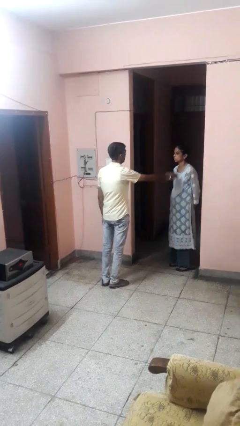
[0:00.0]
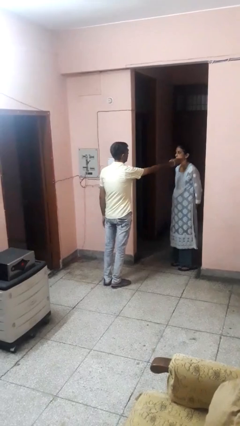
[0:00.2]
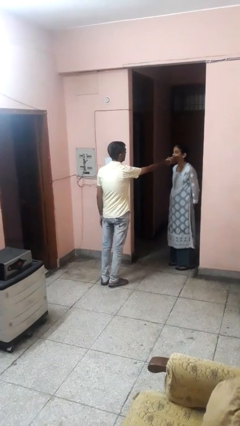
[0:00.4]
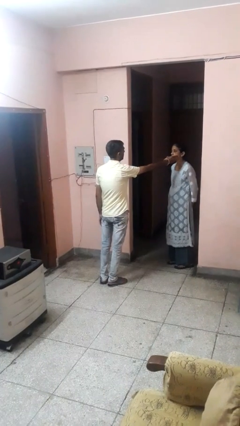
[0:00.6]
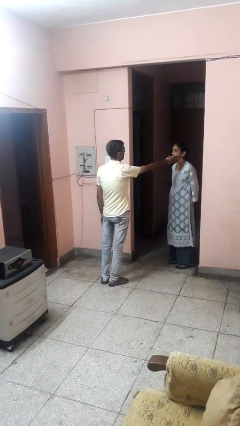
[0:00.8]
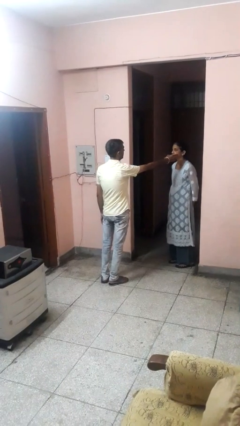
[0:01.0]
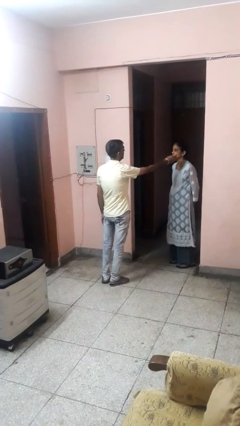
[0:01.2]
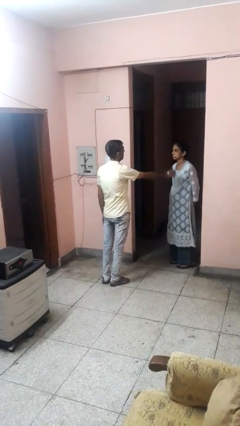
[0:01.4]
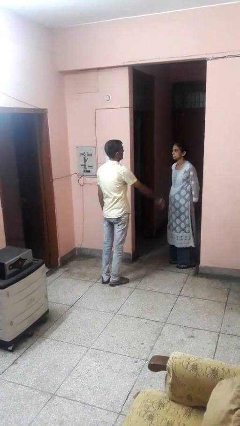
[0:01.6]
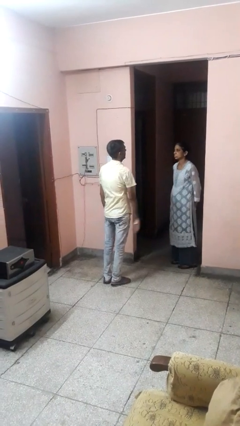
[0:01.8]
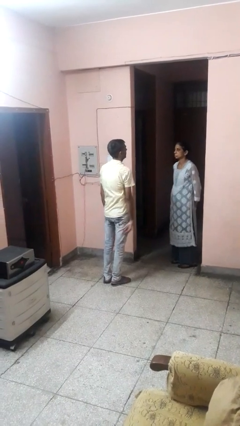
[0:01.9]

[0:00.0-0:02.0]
person touches face of person

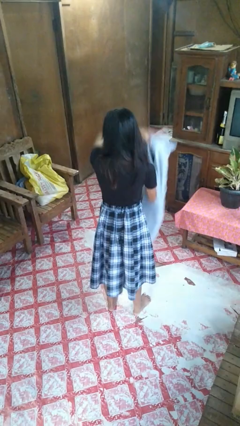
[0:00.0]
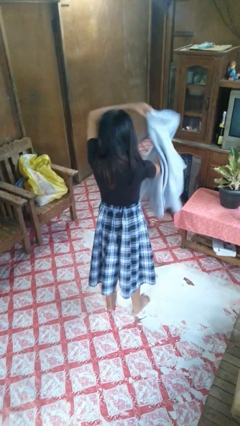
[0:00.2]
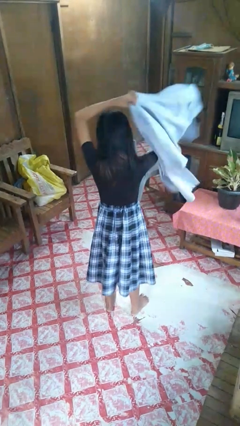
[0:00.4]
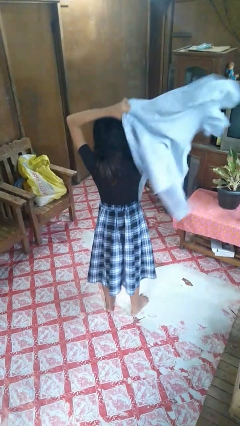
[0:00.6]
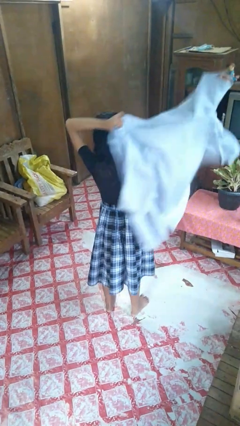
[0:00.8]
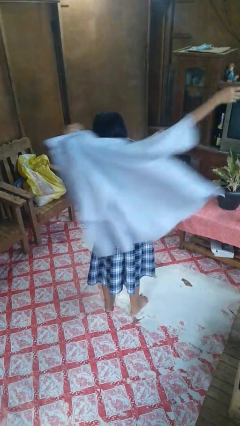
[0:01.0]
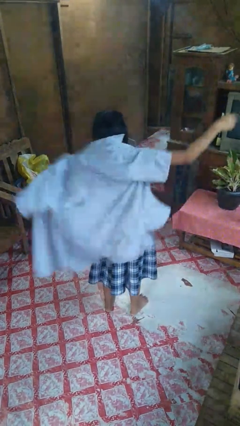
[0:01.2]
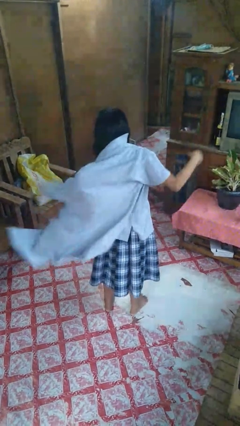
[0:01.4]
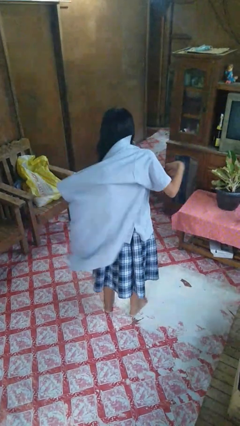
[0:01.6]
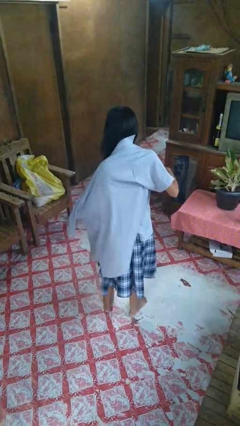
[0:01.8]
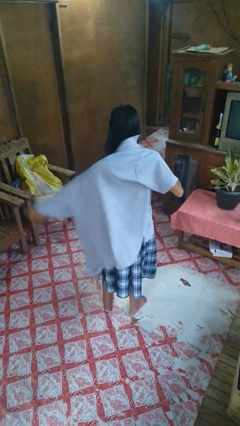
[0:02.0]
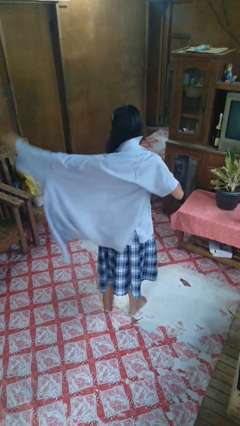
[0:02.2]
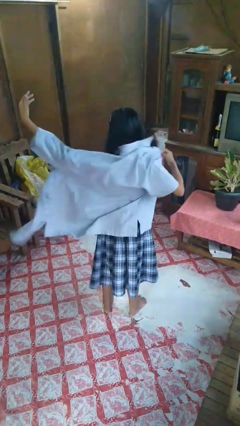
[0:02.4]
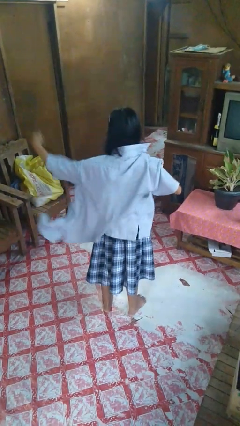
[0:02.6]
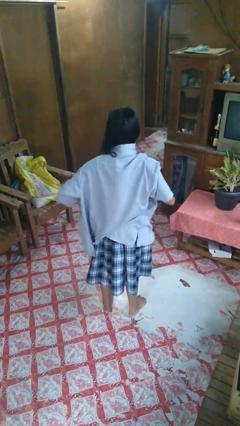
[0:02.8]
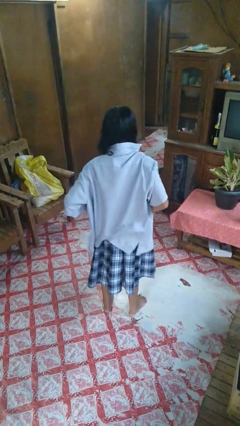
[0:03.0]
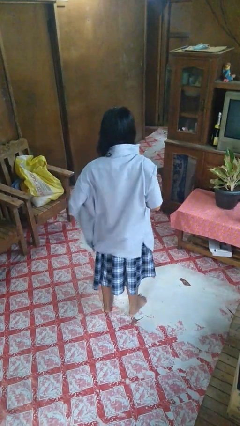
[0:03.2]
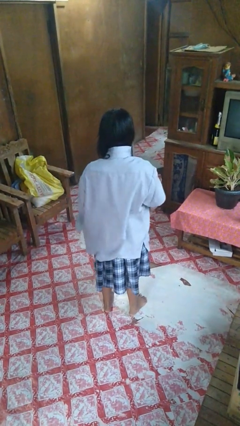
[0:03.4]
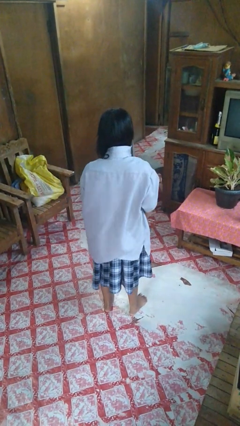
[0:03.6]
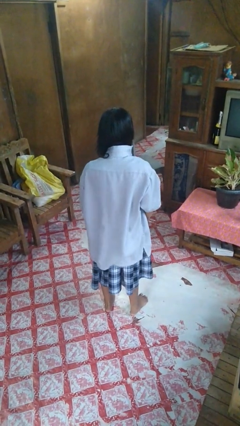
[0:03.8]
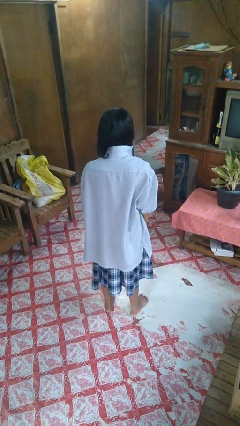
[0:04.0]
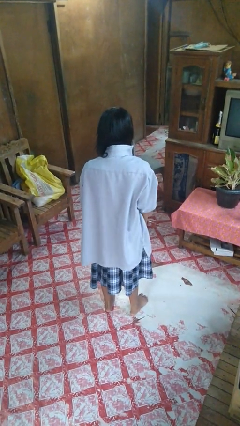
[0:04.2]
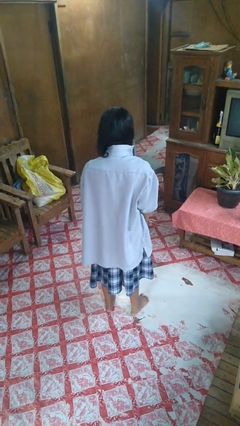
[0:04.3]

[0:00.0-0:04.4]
person puts on shirt

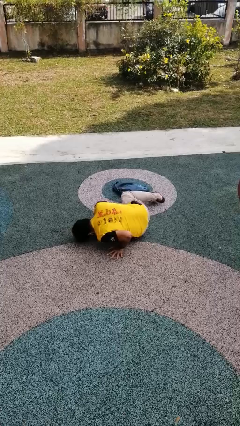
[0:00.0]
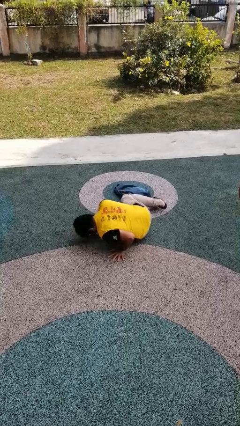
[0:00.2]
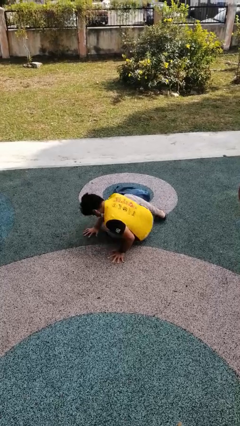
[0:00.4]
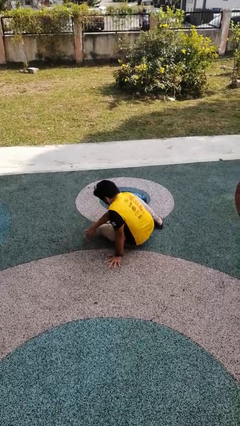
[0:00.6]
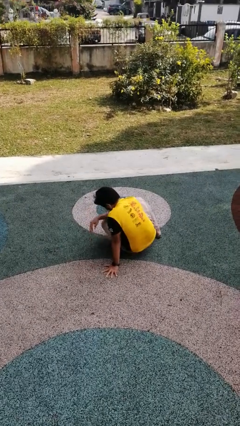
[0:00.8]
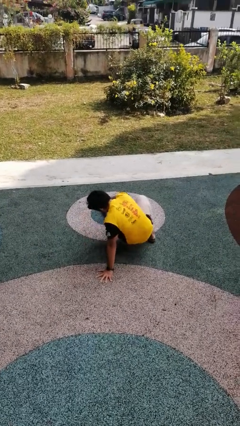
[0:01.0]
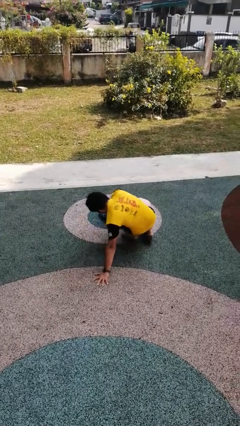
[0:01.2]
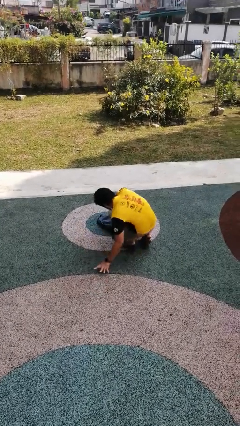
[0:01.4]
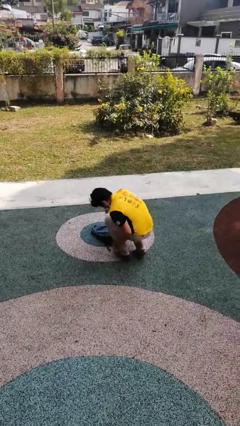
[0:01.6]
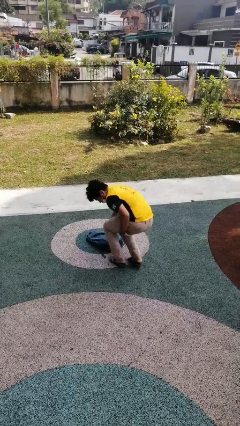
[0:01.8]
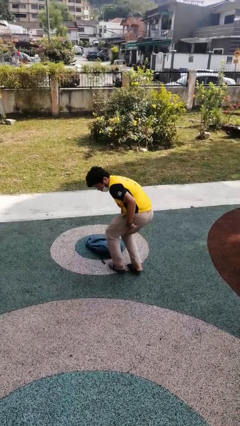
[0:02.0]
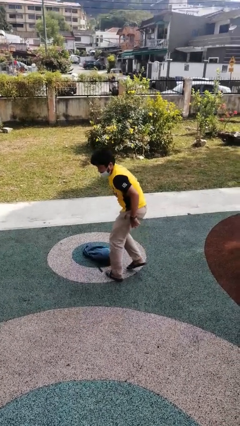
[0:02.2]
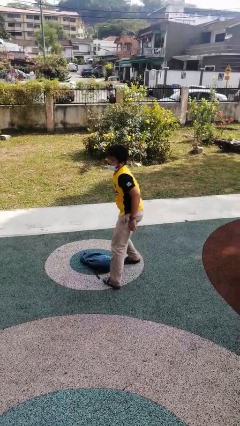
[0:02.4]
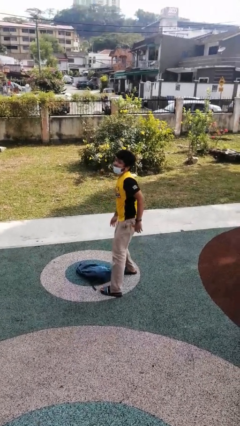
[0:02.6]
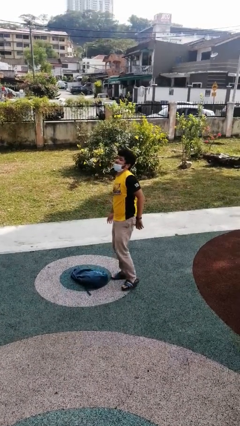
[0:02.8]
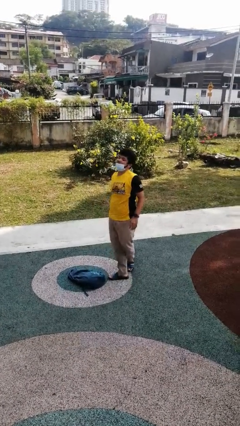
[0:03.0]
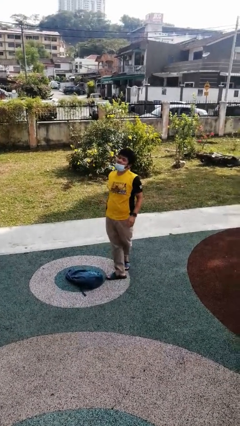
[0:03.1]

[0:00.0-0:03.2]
person stands up from floor

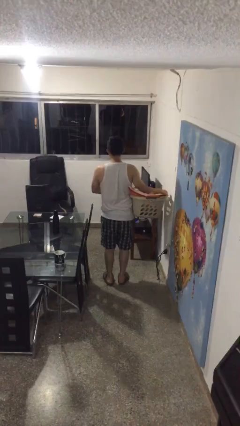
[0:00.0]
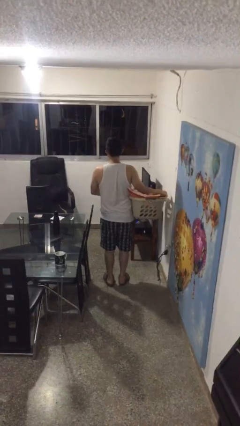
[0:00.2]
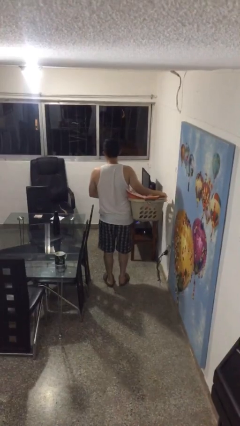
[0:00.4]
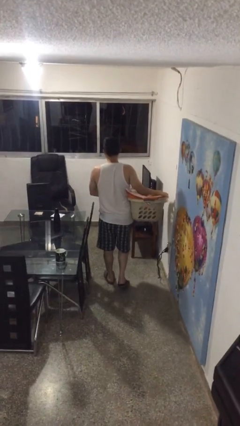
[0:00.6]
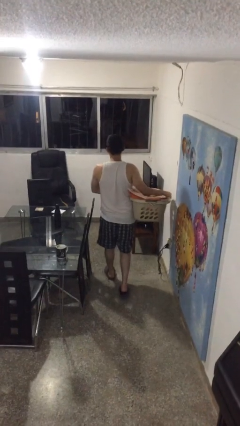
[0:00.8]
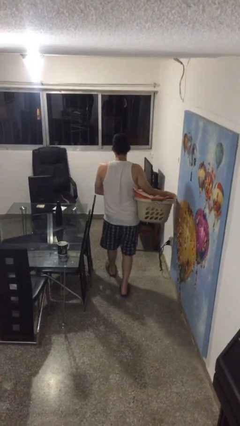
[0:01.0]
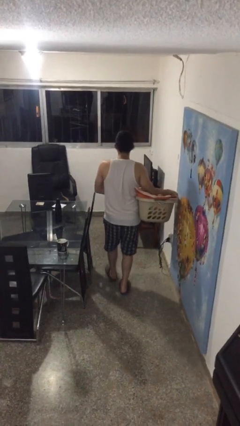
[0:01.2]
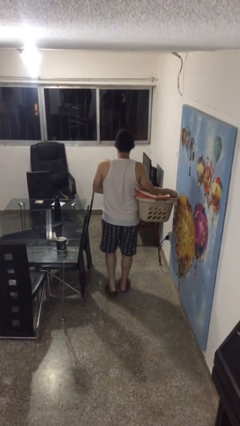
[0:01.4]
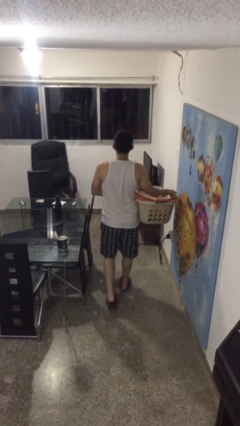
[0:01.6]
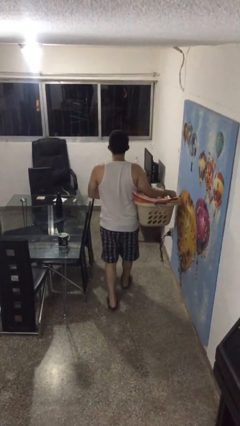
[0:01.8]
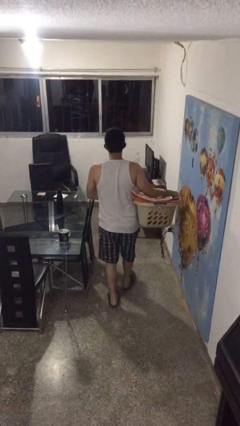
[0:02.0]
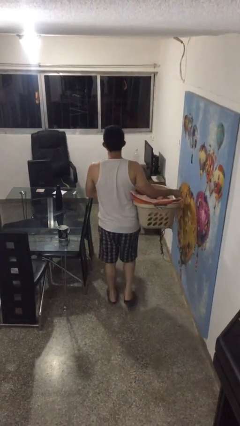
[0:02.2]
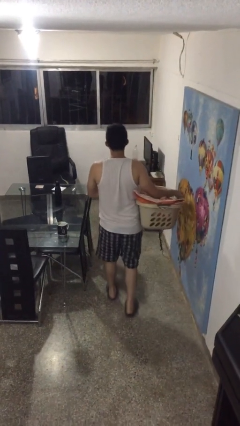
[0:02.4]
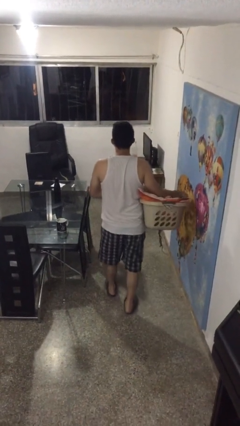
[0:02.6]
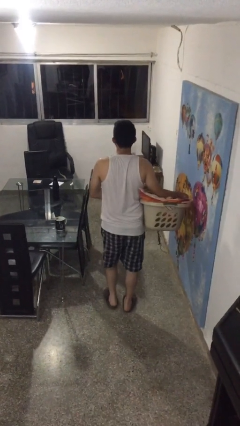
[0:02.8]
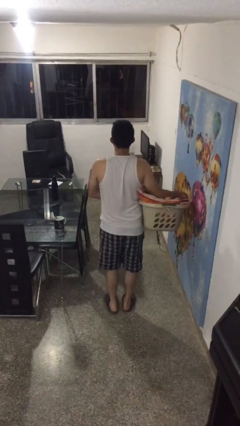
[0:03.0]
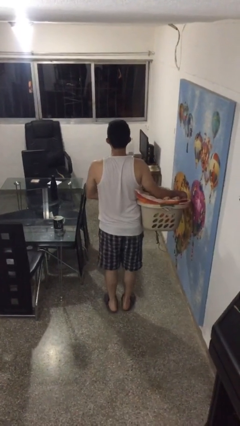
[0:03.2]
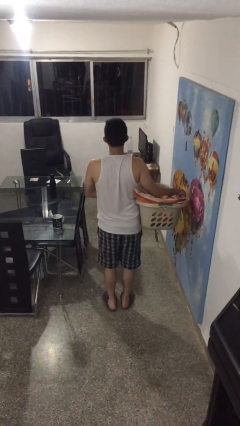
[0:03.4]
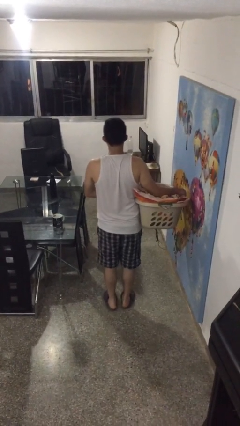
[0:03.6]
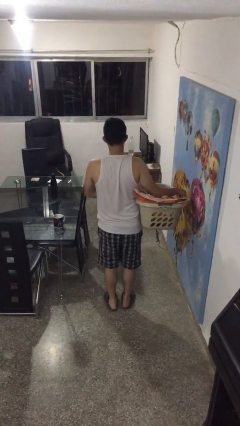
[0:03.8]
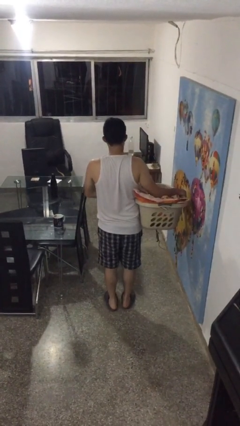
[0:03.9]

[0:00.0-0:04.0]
person carries laundry basket

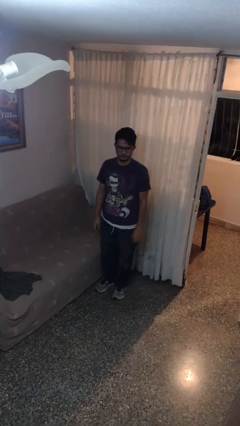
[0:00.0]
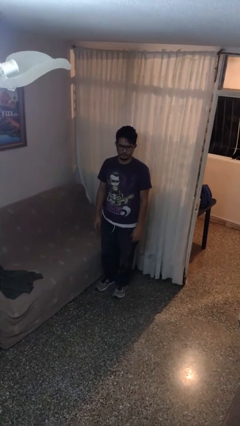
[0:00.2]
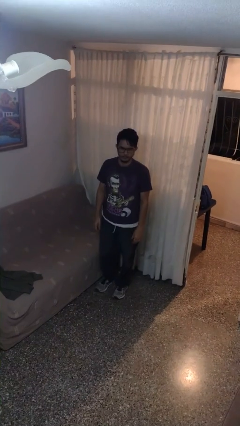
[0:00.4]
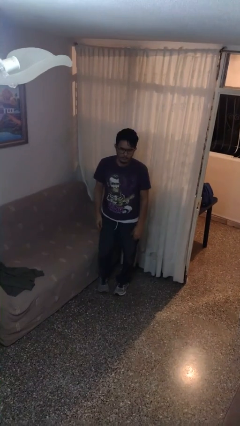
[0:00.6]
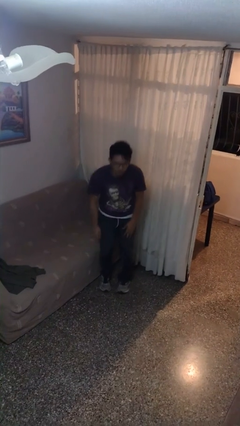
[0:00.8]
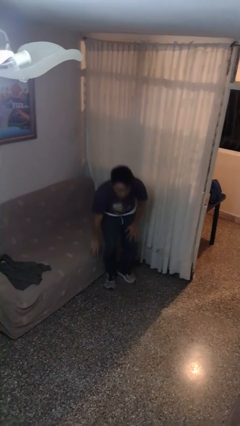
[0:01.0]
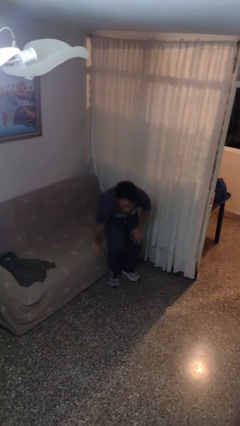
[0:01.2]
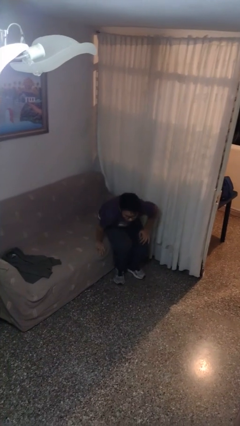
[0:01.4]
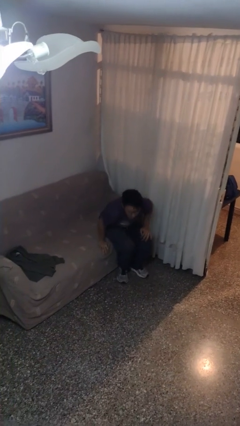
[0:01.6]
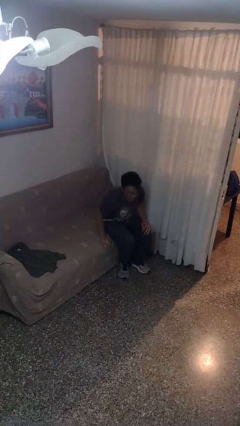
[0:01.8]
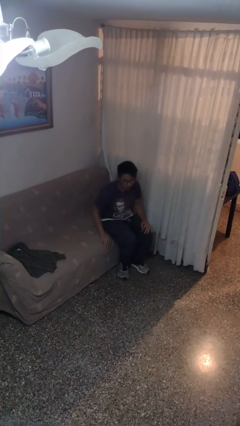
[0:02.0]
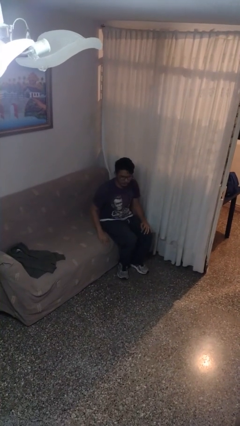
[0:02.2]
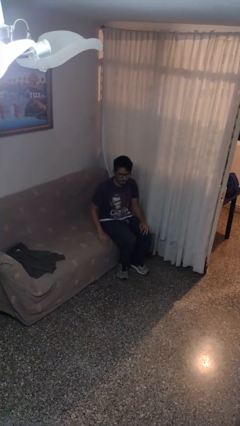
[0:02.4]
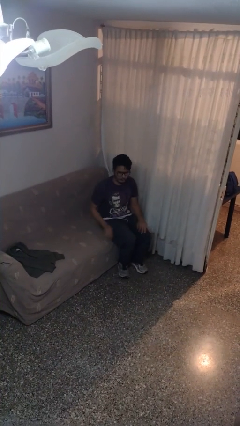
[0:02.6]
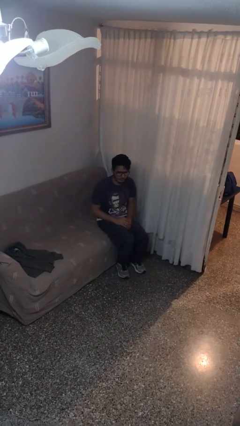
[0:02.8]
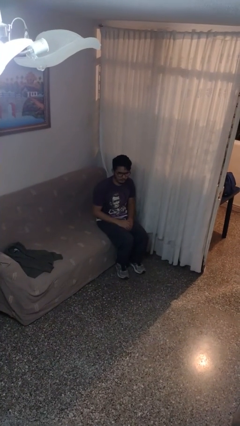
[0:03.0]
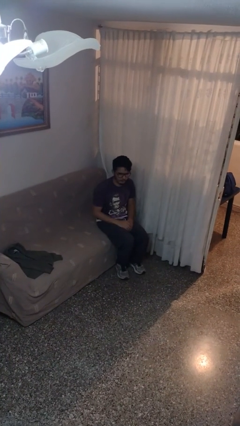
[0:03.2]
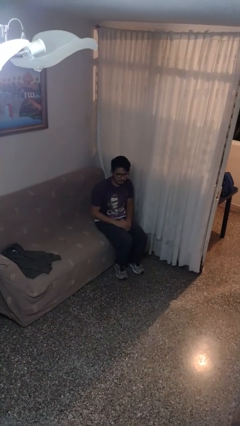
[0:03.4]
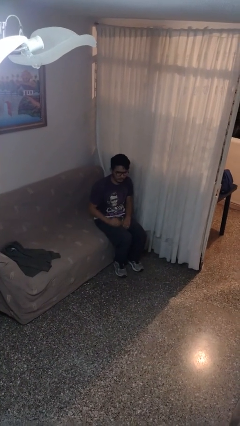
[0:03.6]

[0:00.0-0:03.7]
person sits down

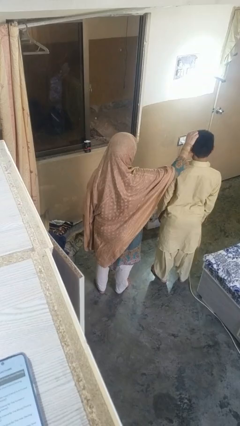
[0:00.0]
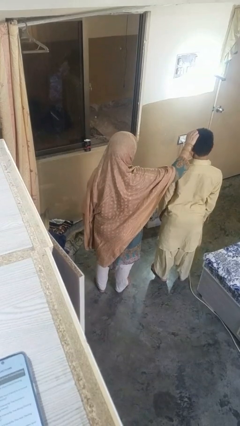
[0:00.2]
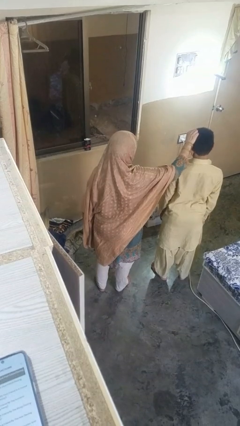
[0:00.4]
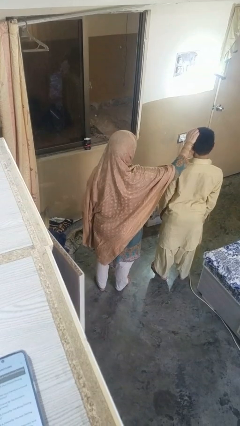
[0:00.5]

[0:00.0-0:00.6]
person grabs person by hair
